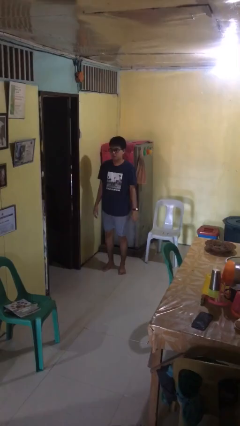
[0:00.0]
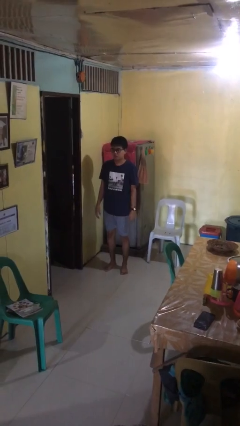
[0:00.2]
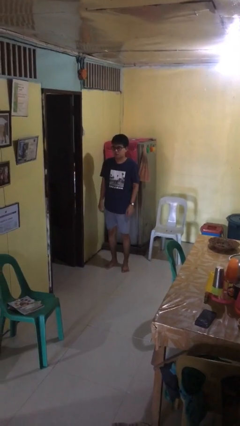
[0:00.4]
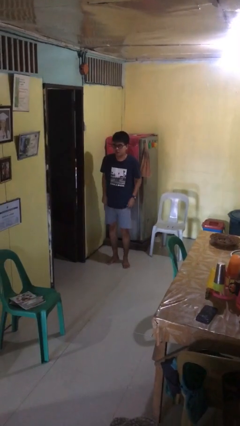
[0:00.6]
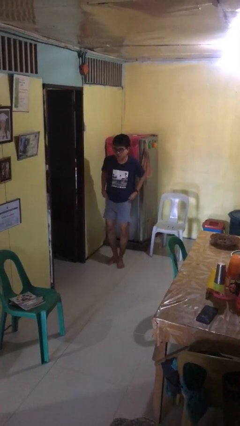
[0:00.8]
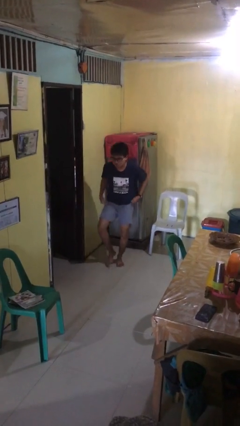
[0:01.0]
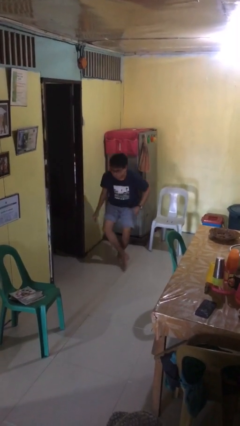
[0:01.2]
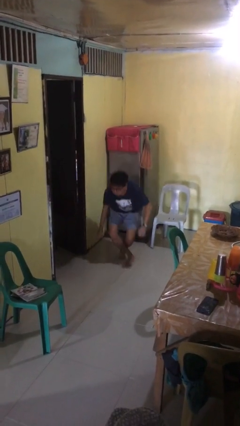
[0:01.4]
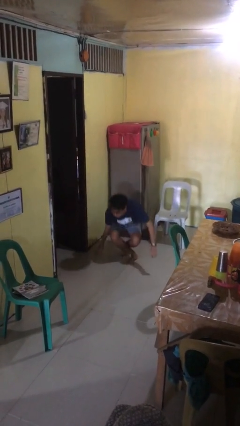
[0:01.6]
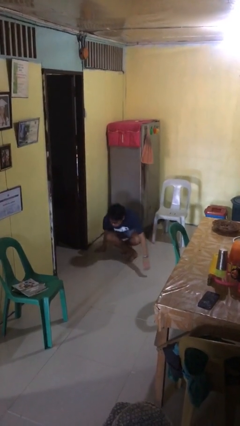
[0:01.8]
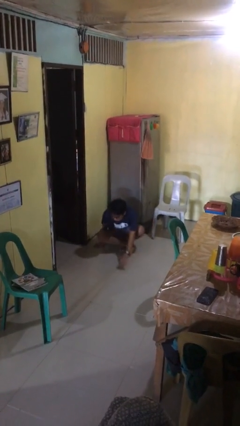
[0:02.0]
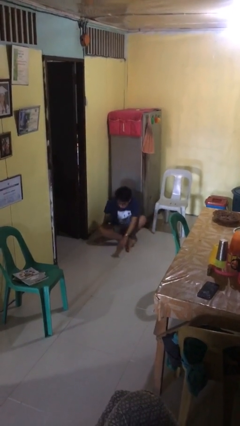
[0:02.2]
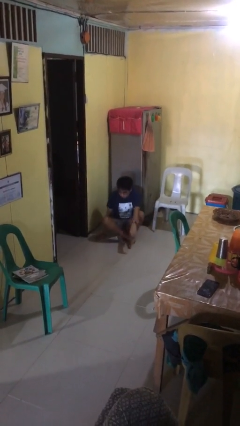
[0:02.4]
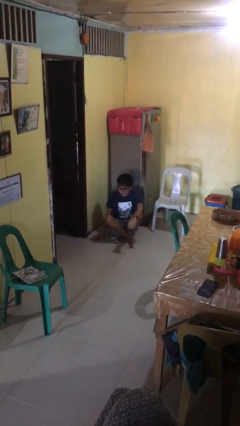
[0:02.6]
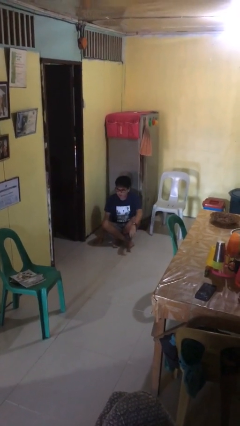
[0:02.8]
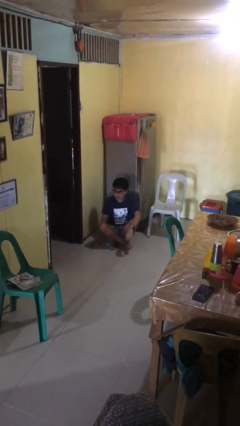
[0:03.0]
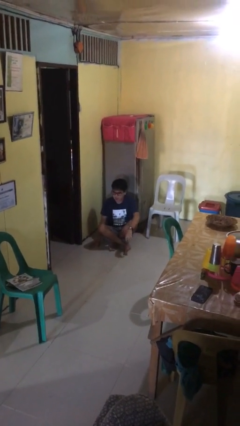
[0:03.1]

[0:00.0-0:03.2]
person sits crisscross

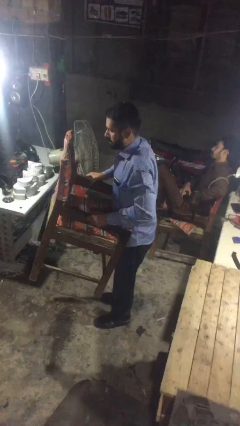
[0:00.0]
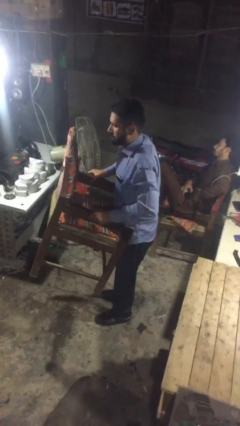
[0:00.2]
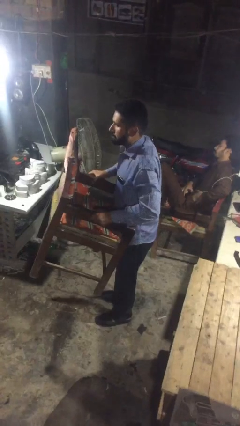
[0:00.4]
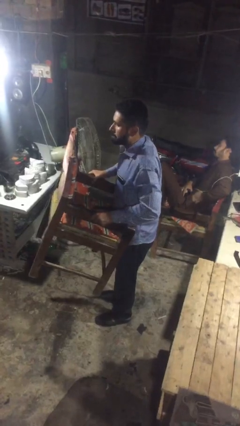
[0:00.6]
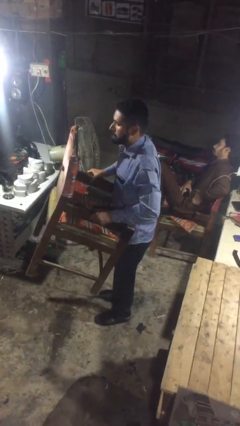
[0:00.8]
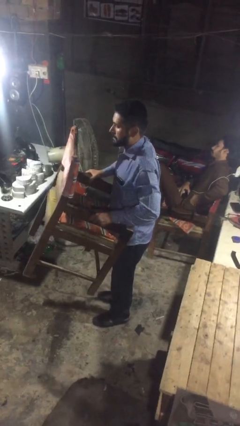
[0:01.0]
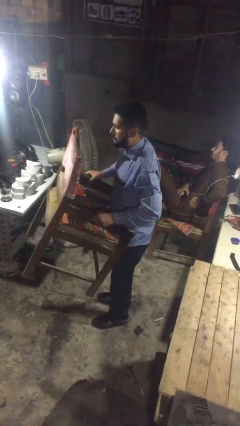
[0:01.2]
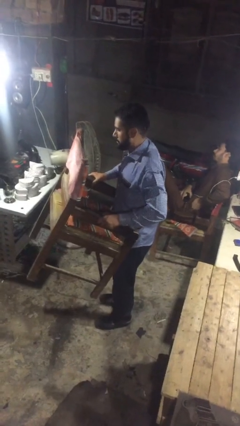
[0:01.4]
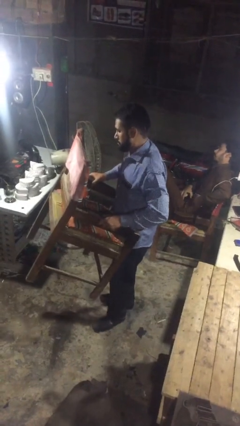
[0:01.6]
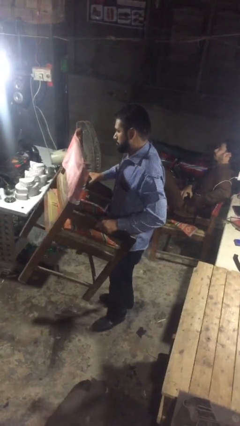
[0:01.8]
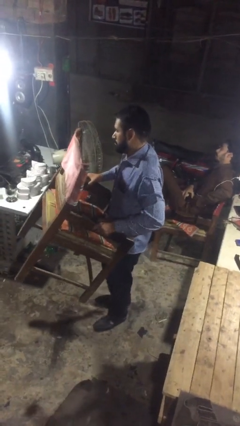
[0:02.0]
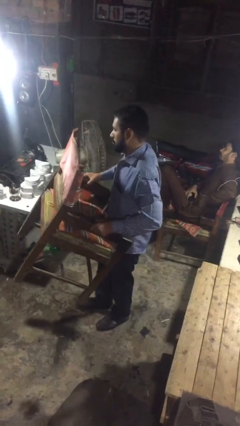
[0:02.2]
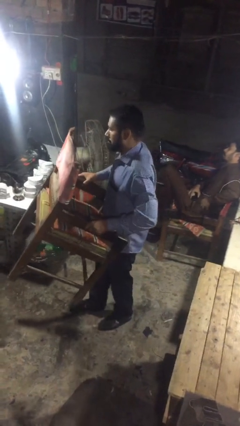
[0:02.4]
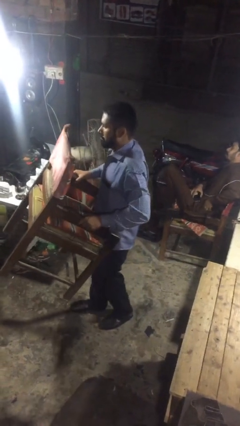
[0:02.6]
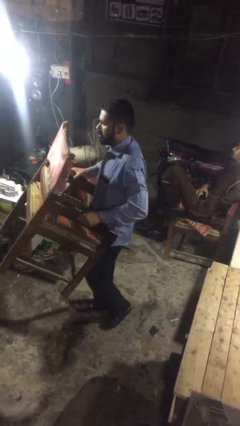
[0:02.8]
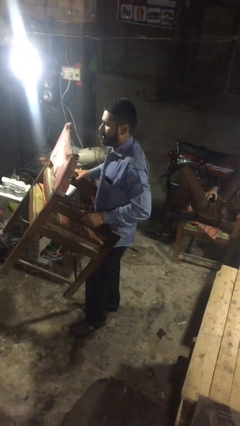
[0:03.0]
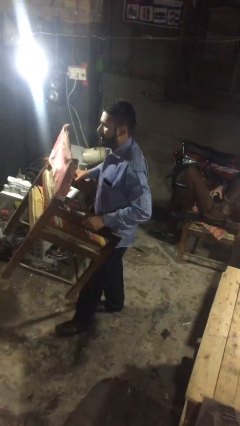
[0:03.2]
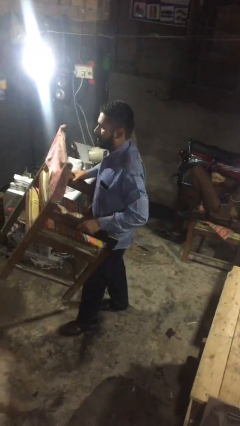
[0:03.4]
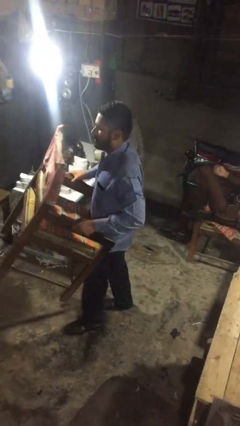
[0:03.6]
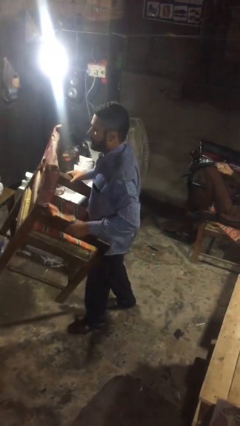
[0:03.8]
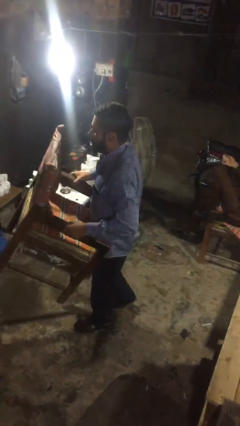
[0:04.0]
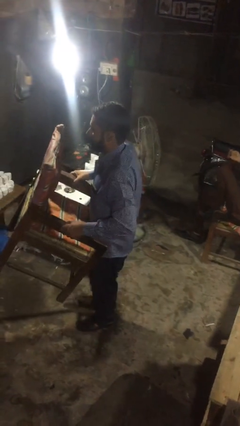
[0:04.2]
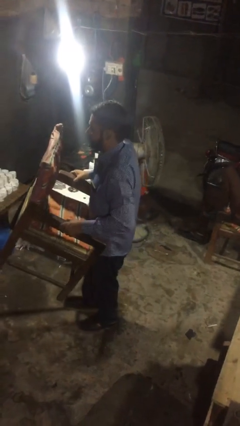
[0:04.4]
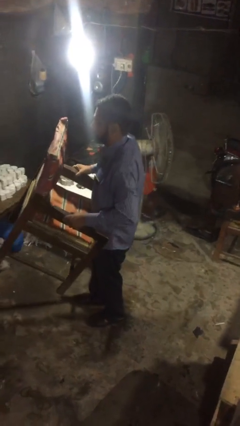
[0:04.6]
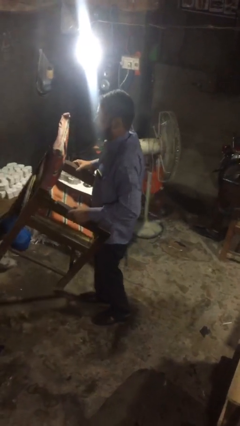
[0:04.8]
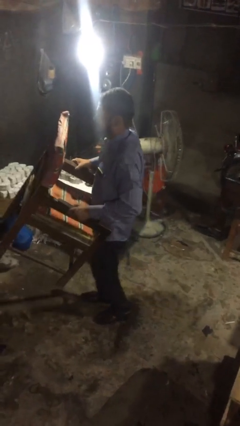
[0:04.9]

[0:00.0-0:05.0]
person carries heavy object

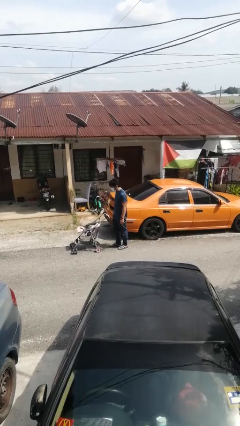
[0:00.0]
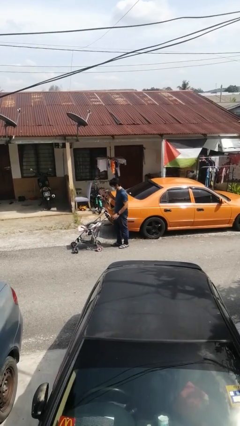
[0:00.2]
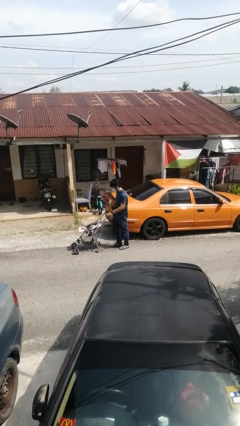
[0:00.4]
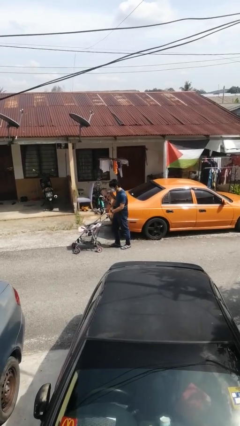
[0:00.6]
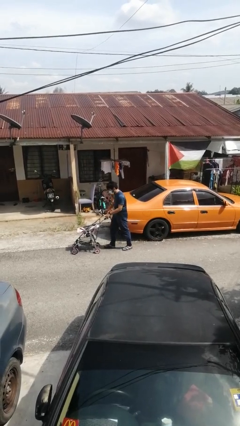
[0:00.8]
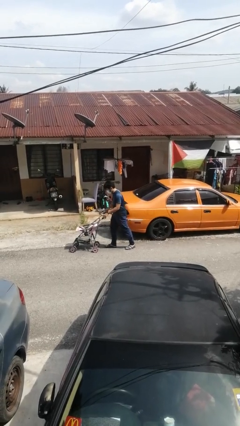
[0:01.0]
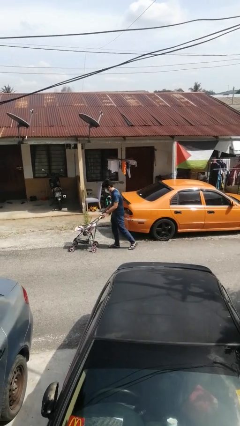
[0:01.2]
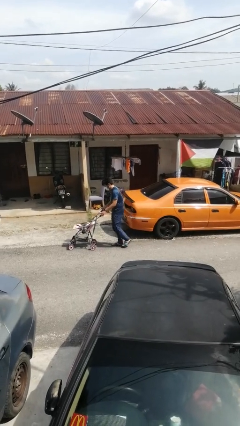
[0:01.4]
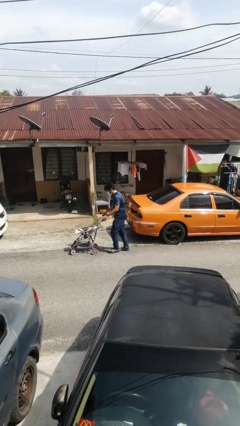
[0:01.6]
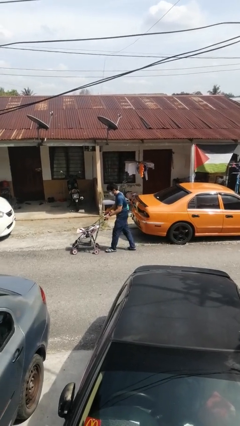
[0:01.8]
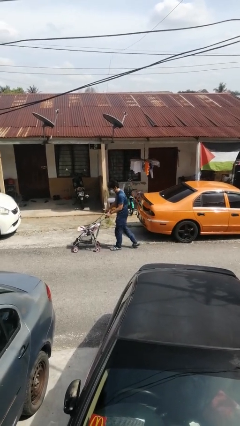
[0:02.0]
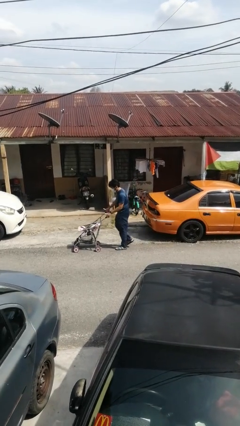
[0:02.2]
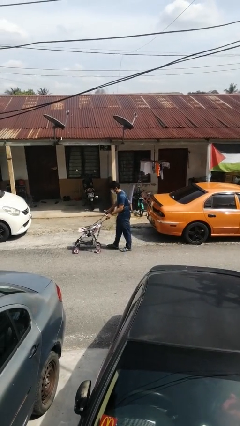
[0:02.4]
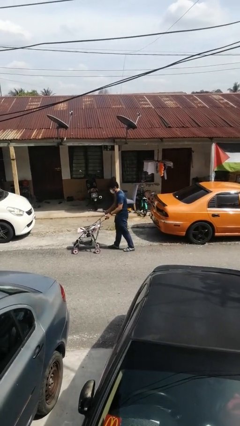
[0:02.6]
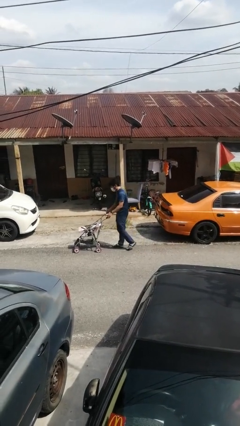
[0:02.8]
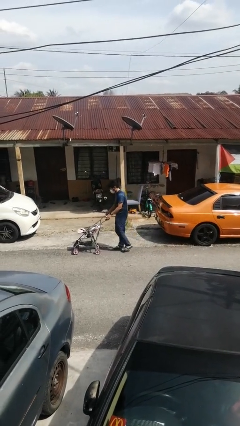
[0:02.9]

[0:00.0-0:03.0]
person pushes wheeled cart

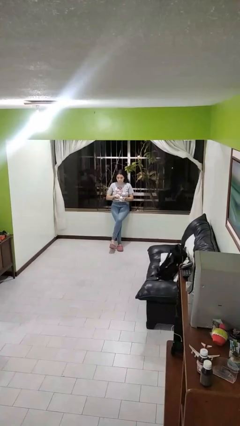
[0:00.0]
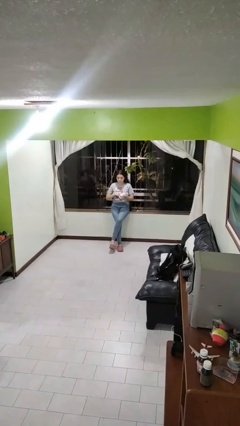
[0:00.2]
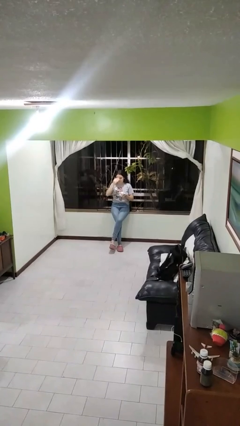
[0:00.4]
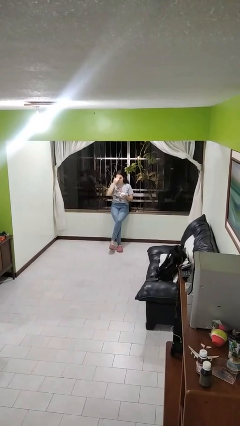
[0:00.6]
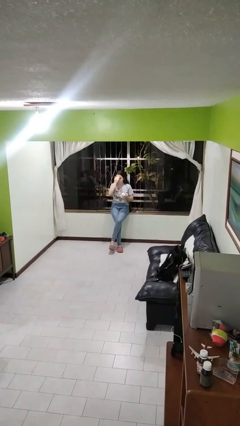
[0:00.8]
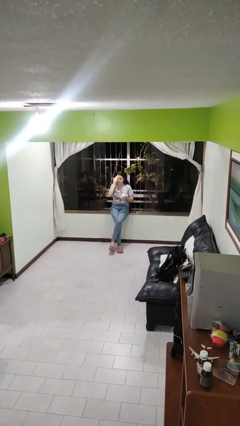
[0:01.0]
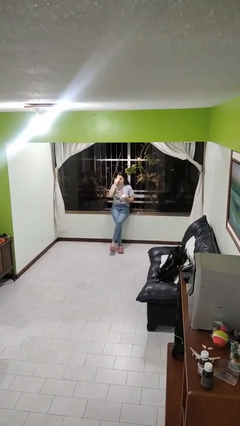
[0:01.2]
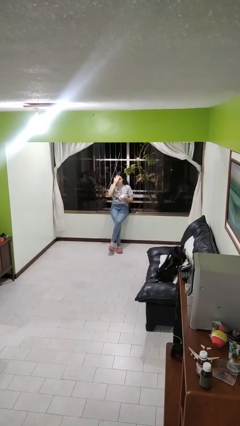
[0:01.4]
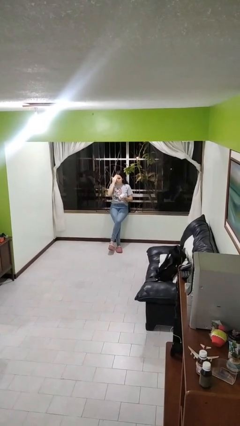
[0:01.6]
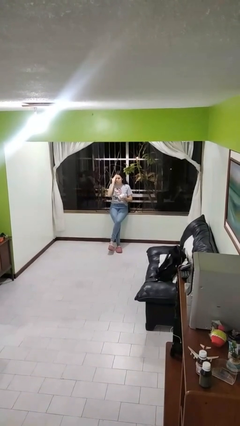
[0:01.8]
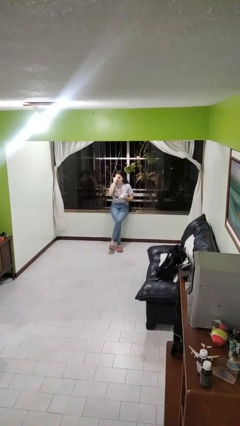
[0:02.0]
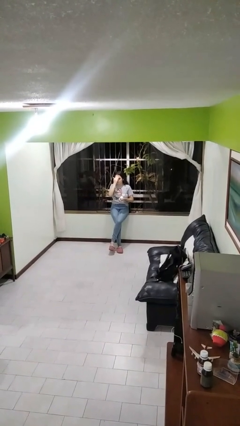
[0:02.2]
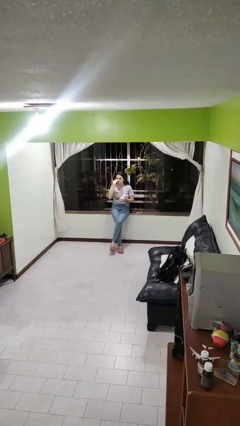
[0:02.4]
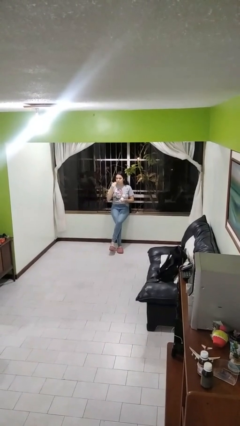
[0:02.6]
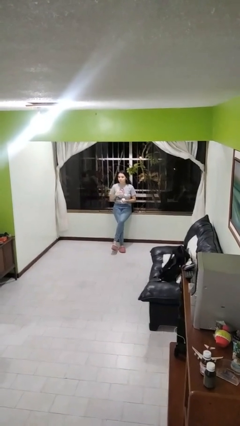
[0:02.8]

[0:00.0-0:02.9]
person applies facial moisturizer

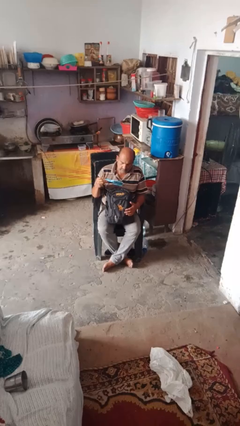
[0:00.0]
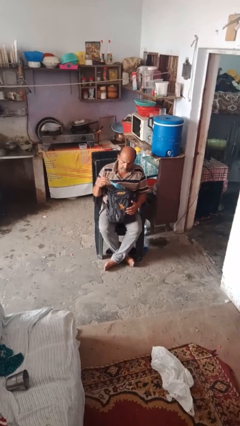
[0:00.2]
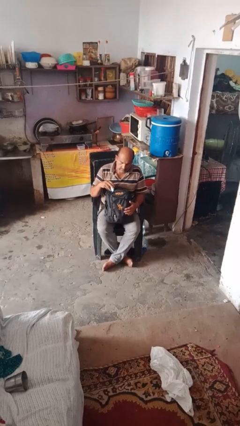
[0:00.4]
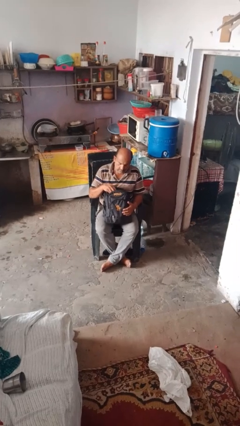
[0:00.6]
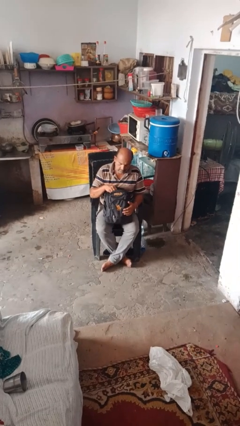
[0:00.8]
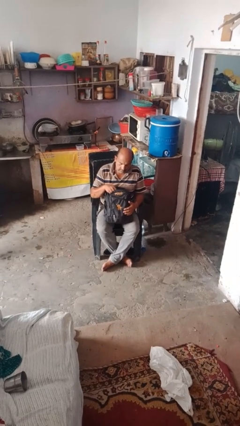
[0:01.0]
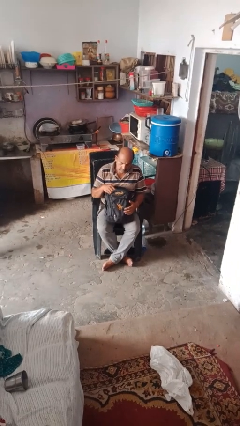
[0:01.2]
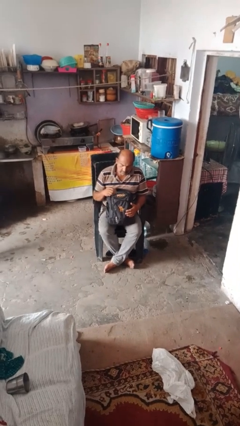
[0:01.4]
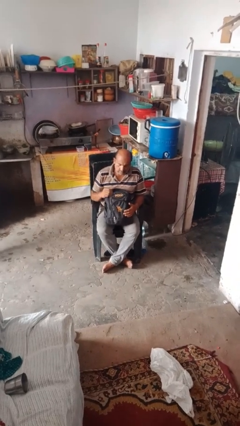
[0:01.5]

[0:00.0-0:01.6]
person puts object into backpack

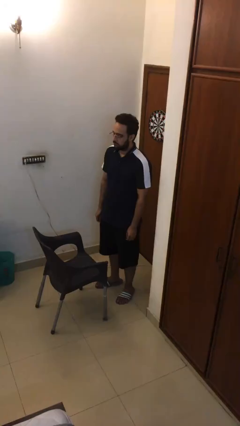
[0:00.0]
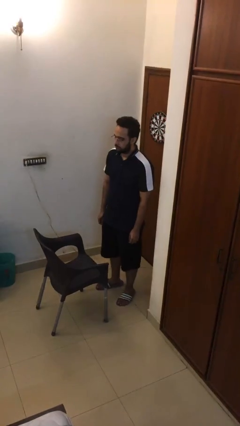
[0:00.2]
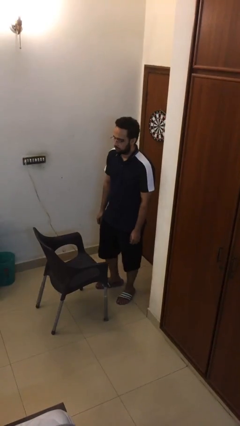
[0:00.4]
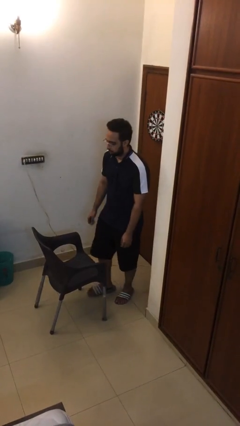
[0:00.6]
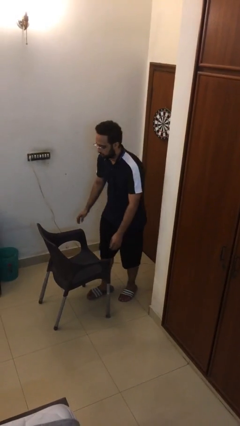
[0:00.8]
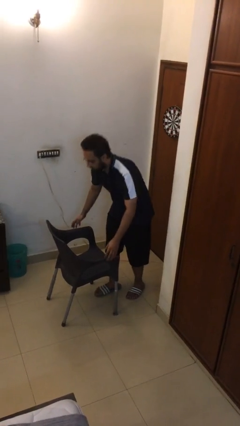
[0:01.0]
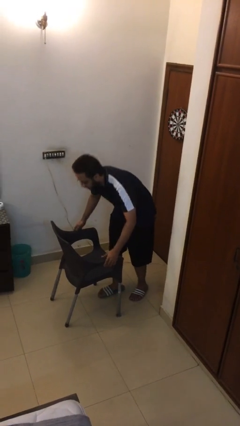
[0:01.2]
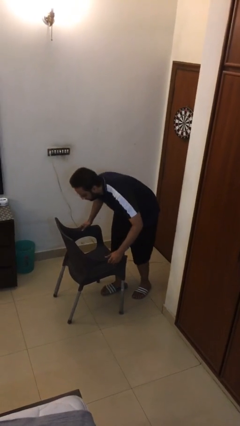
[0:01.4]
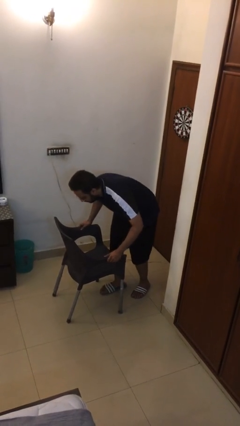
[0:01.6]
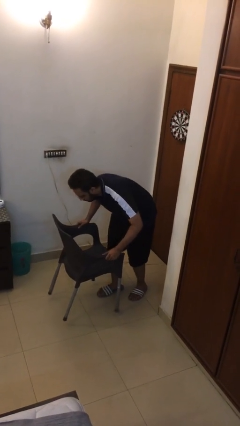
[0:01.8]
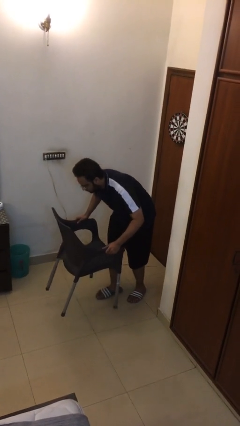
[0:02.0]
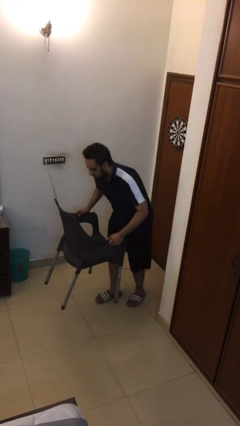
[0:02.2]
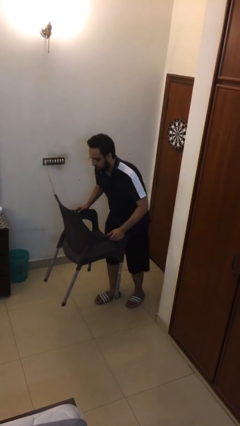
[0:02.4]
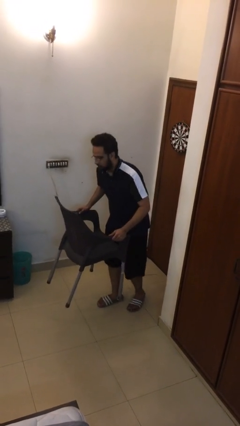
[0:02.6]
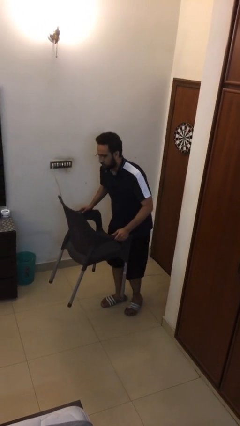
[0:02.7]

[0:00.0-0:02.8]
person picks up object from floor
